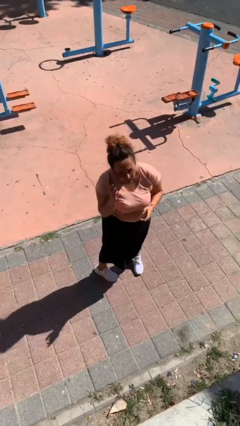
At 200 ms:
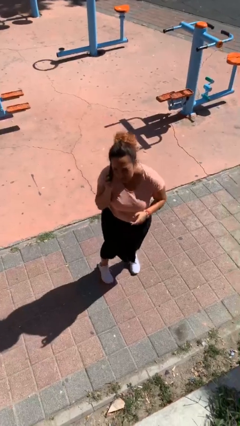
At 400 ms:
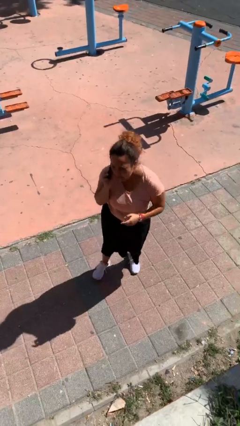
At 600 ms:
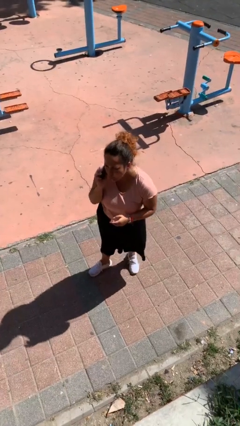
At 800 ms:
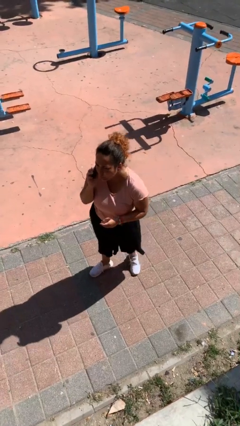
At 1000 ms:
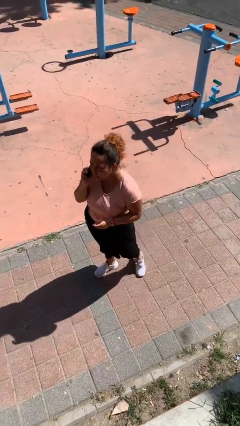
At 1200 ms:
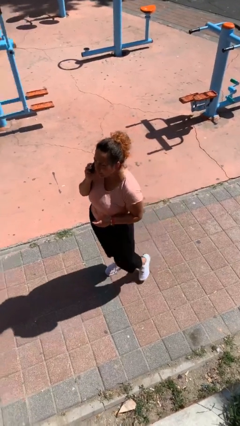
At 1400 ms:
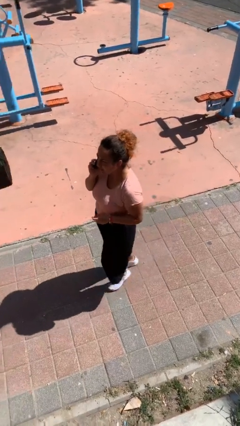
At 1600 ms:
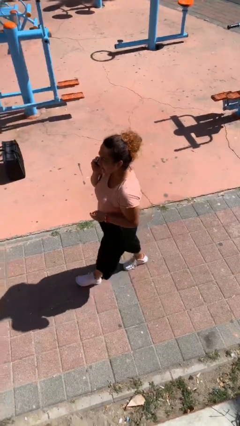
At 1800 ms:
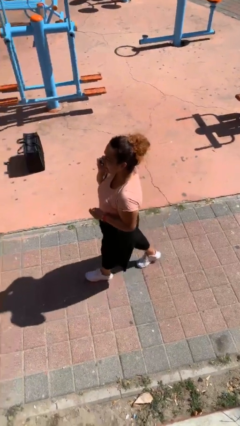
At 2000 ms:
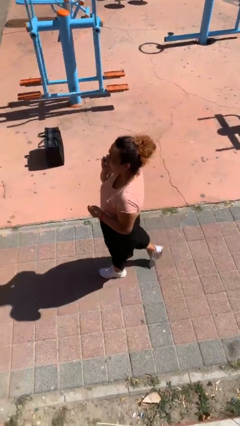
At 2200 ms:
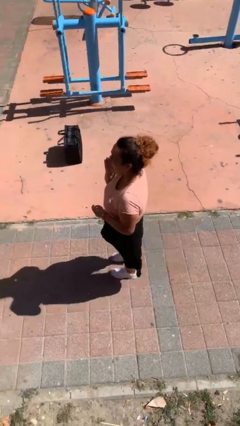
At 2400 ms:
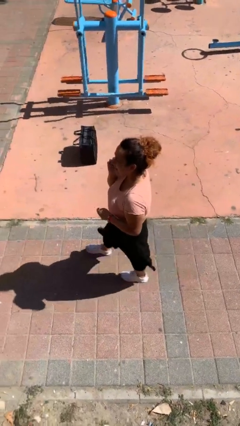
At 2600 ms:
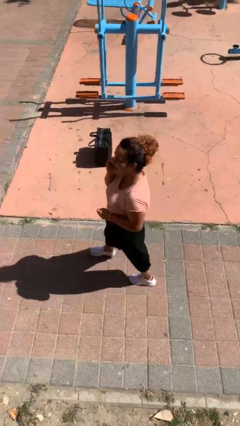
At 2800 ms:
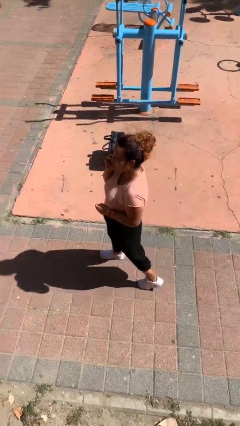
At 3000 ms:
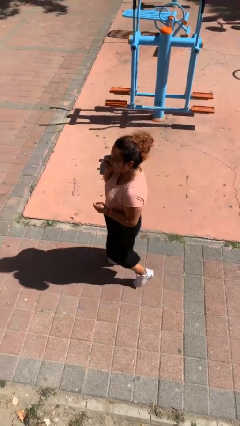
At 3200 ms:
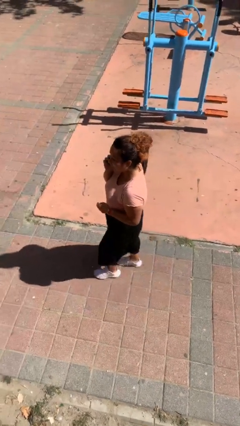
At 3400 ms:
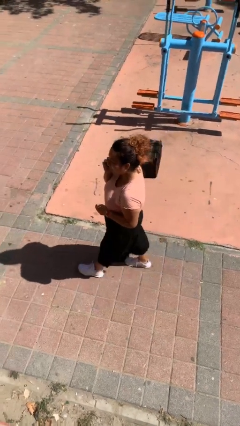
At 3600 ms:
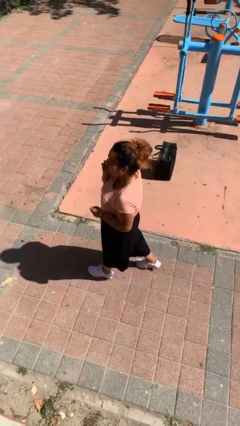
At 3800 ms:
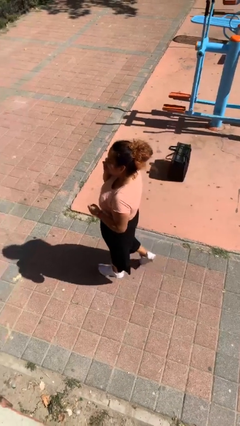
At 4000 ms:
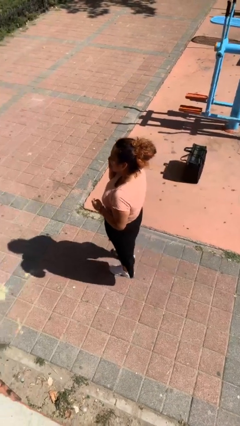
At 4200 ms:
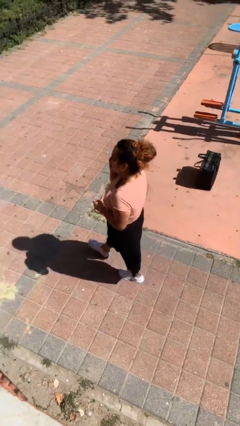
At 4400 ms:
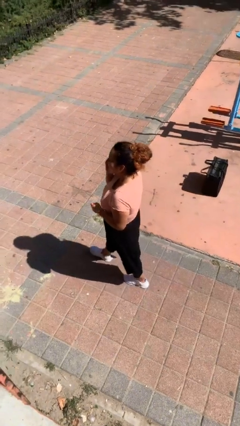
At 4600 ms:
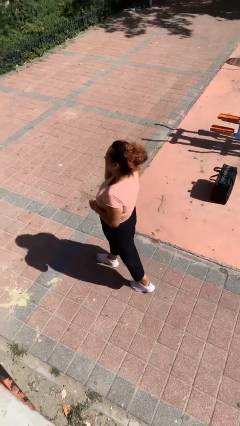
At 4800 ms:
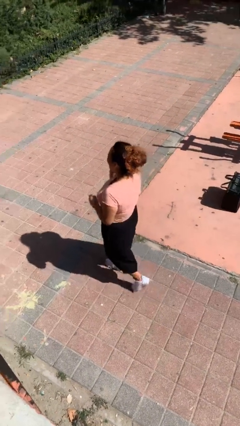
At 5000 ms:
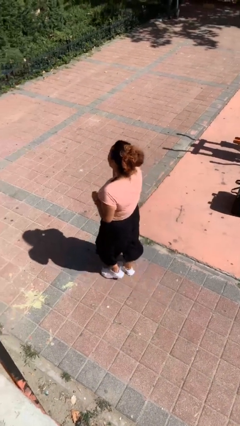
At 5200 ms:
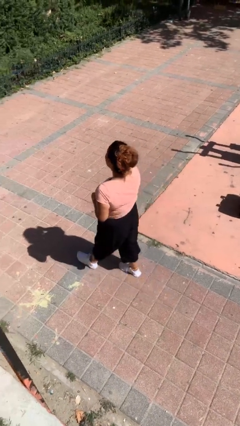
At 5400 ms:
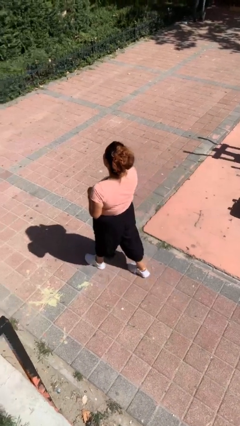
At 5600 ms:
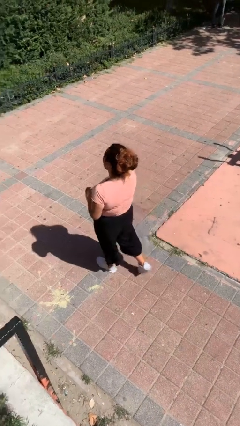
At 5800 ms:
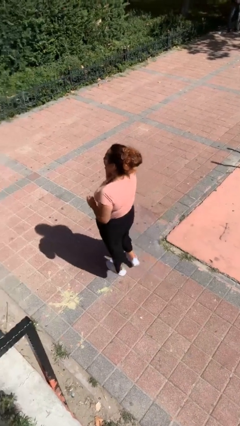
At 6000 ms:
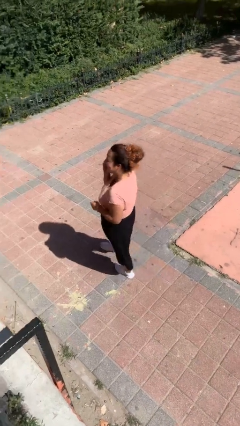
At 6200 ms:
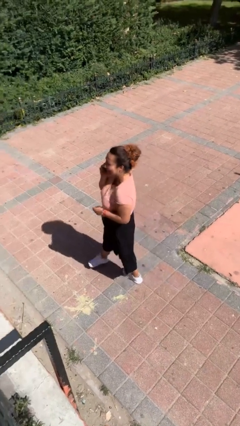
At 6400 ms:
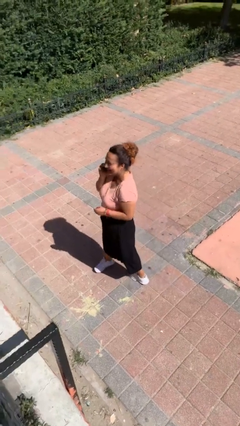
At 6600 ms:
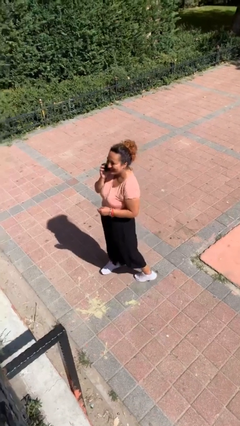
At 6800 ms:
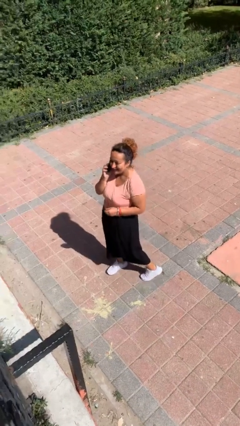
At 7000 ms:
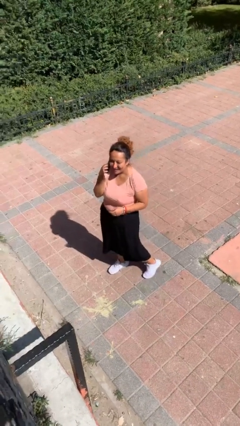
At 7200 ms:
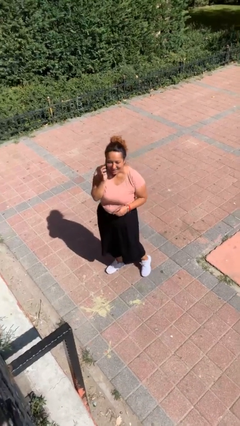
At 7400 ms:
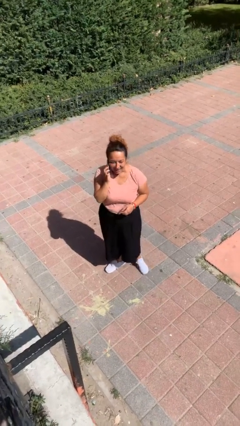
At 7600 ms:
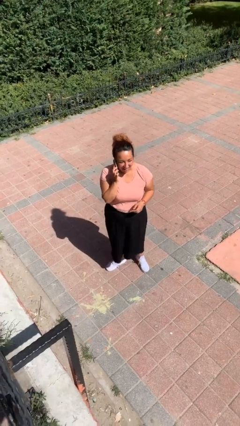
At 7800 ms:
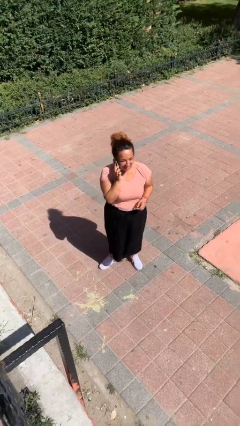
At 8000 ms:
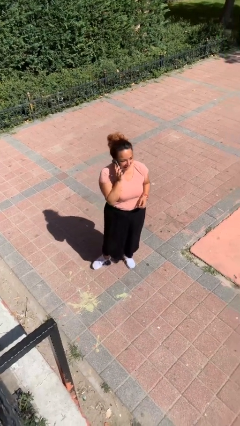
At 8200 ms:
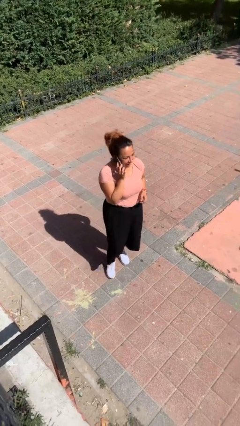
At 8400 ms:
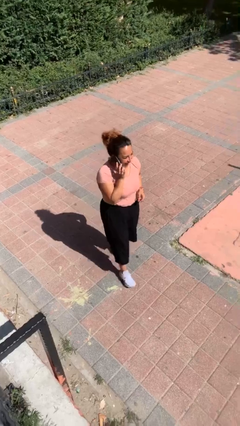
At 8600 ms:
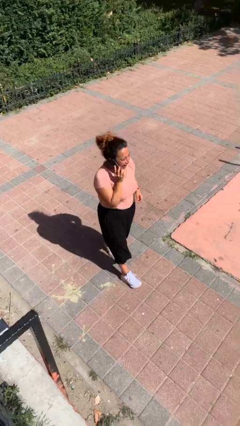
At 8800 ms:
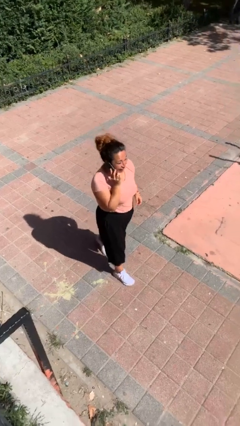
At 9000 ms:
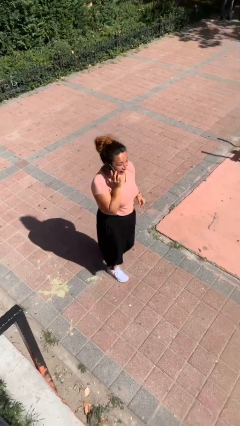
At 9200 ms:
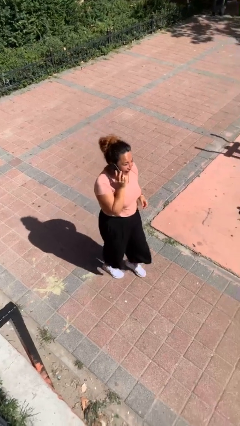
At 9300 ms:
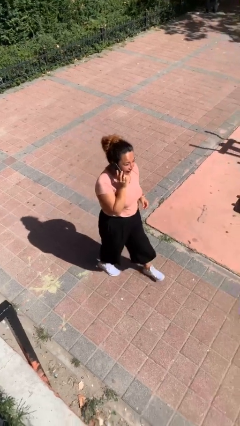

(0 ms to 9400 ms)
person talks on phone

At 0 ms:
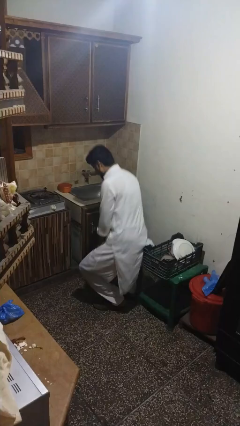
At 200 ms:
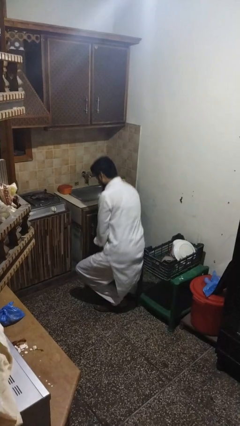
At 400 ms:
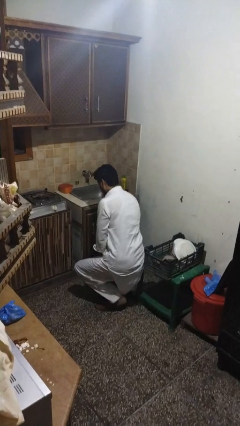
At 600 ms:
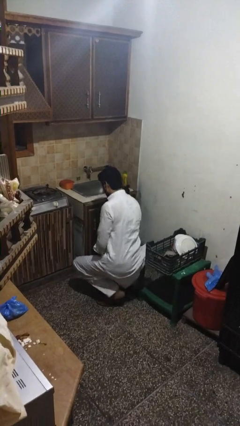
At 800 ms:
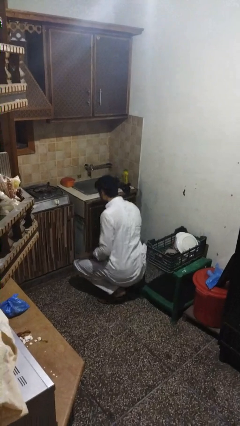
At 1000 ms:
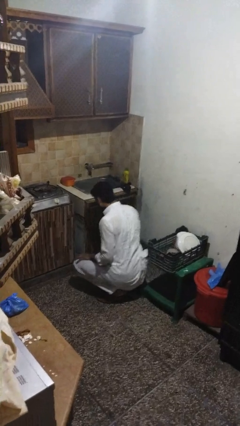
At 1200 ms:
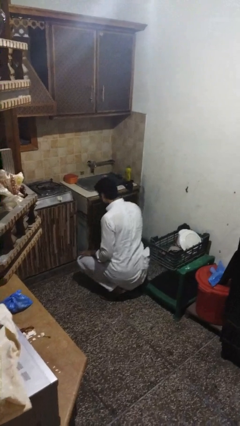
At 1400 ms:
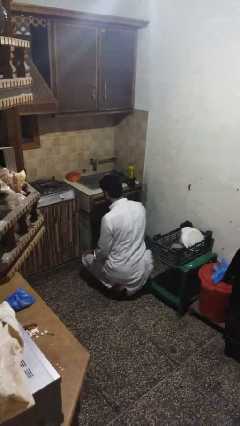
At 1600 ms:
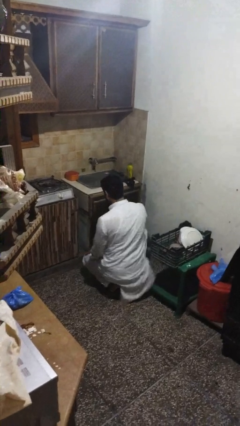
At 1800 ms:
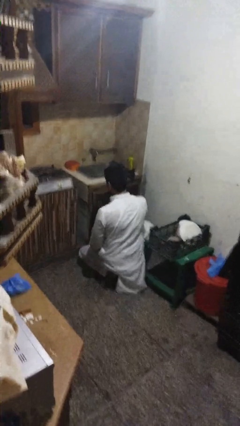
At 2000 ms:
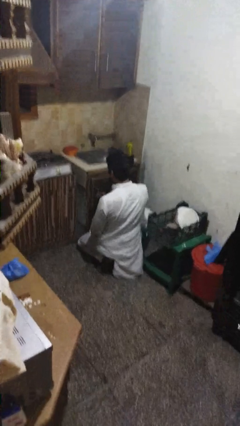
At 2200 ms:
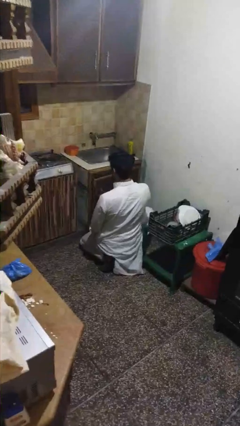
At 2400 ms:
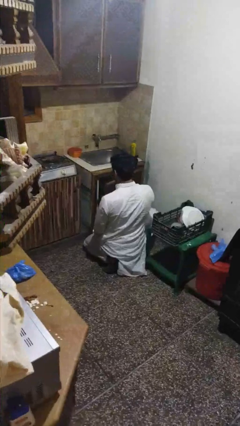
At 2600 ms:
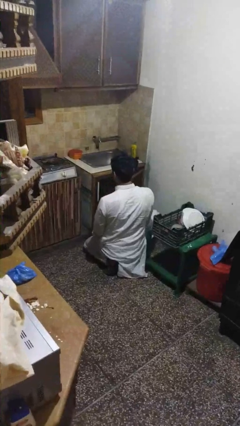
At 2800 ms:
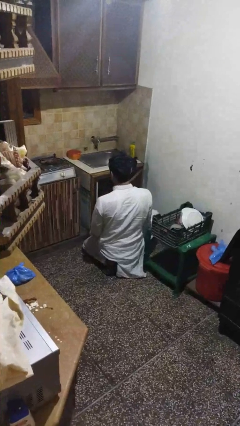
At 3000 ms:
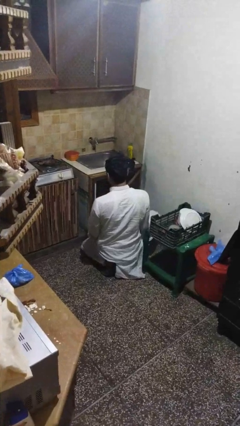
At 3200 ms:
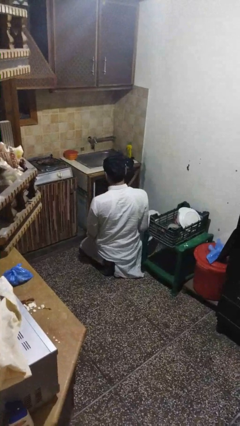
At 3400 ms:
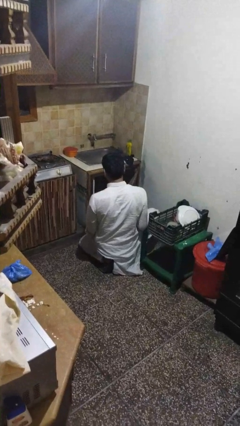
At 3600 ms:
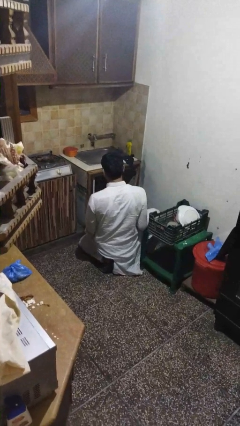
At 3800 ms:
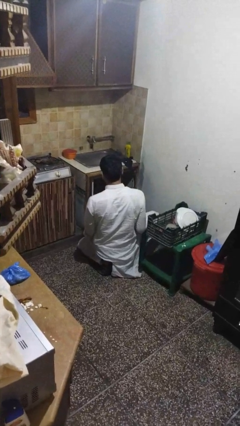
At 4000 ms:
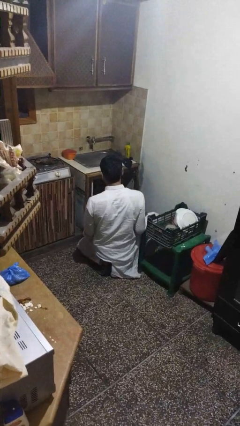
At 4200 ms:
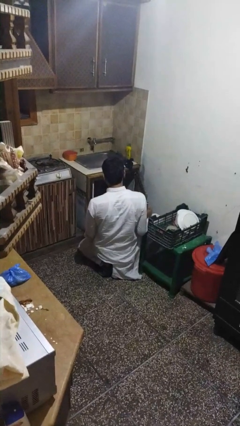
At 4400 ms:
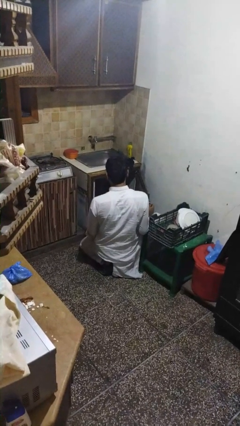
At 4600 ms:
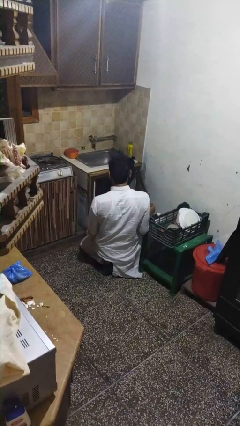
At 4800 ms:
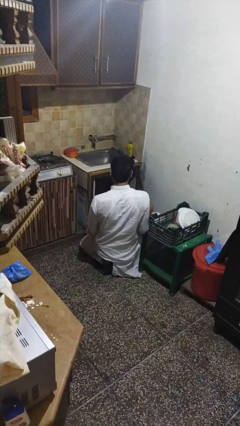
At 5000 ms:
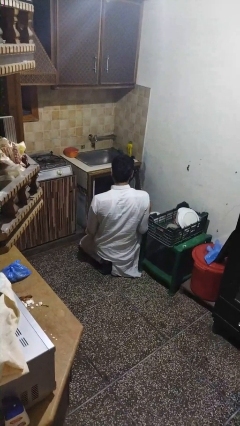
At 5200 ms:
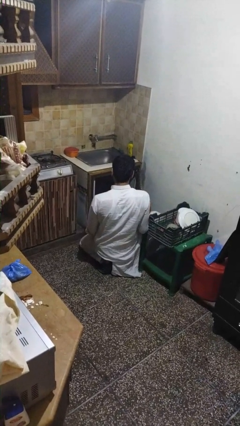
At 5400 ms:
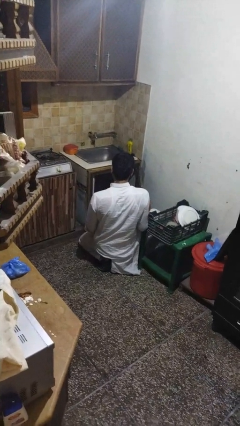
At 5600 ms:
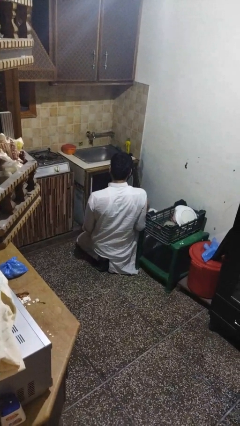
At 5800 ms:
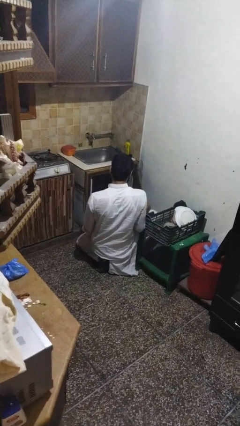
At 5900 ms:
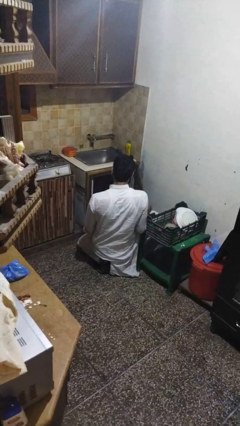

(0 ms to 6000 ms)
person opens cabinet

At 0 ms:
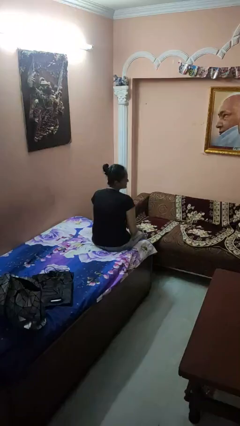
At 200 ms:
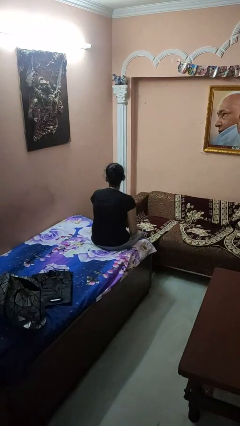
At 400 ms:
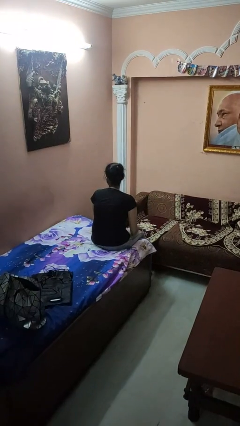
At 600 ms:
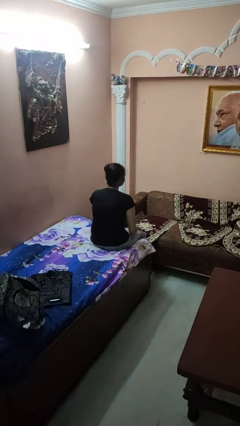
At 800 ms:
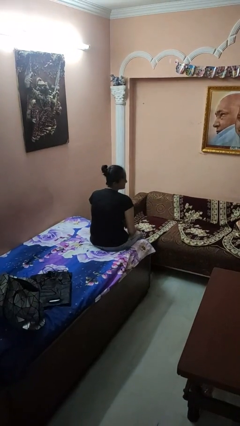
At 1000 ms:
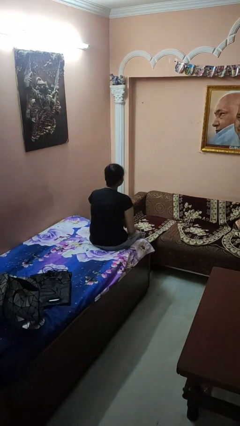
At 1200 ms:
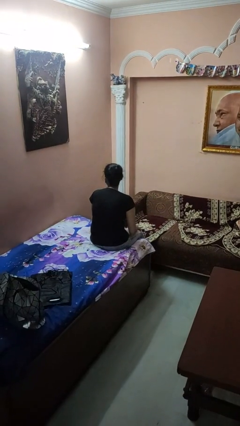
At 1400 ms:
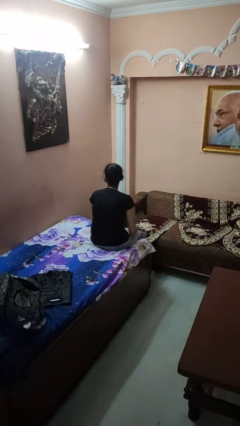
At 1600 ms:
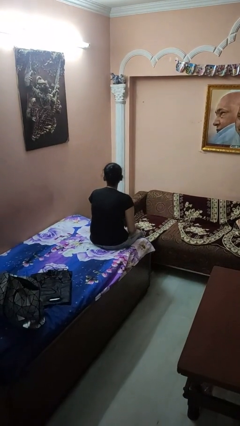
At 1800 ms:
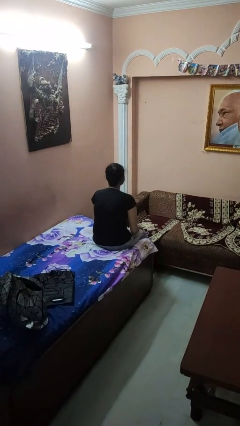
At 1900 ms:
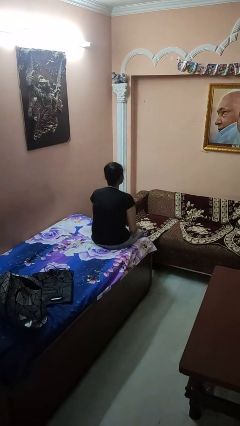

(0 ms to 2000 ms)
person shakes head

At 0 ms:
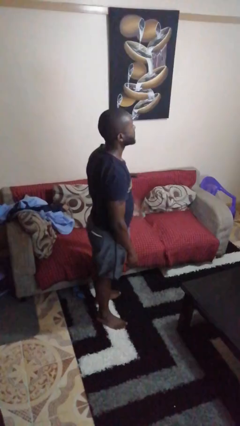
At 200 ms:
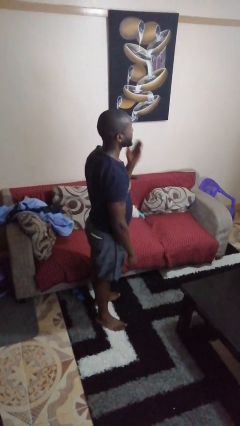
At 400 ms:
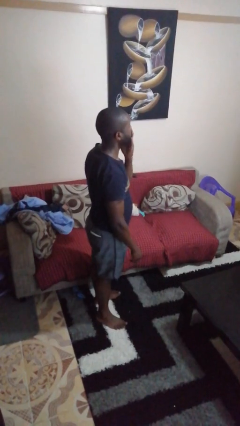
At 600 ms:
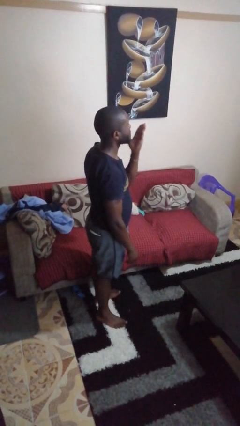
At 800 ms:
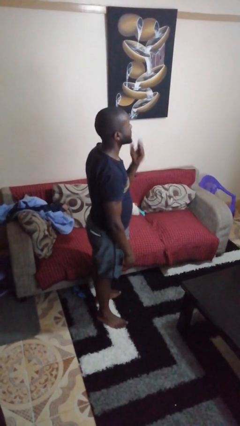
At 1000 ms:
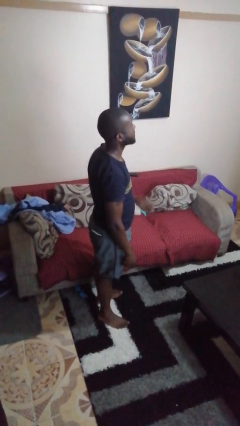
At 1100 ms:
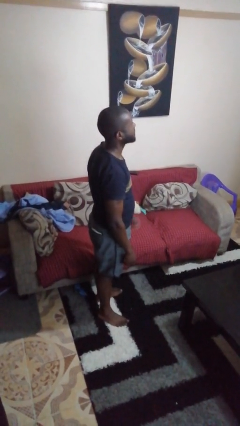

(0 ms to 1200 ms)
person gestures blow kiss
